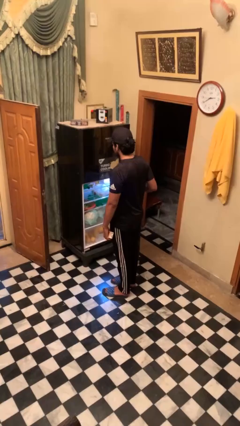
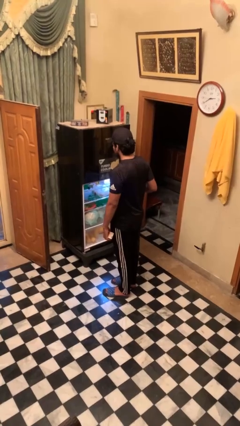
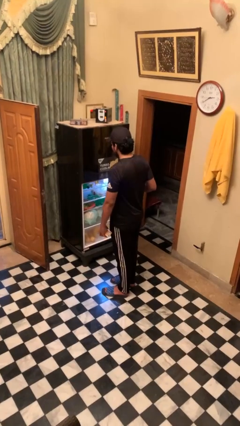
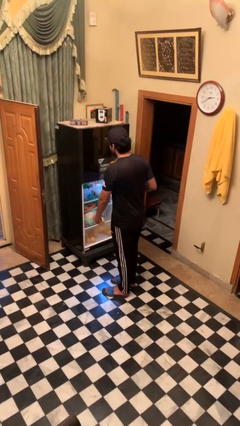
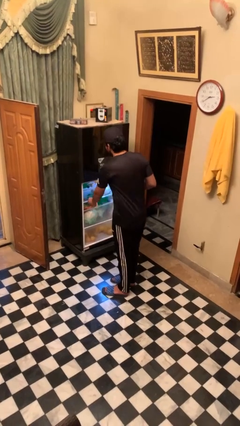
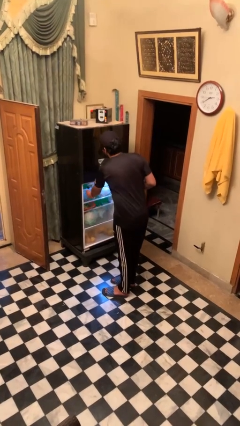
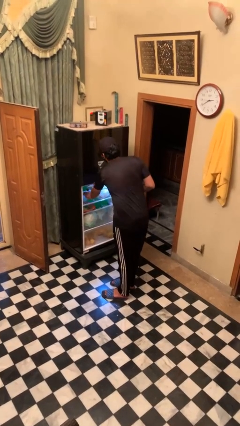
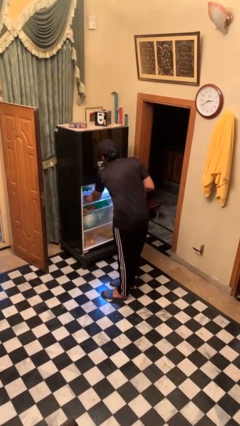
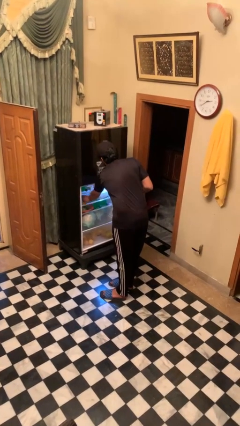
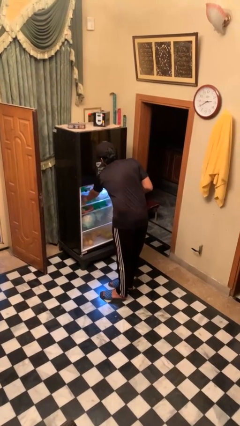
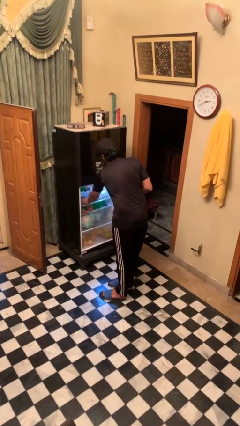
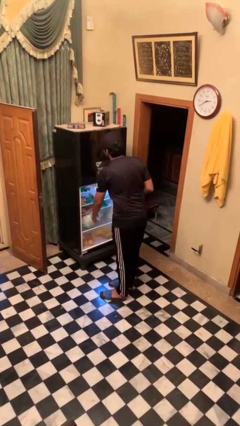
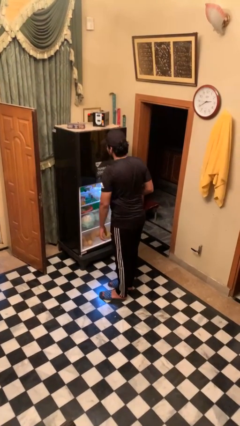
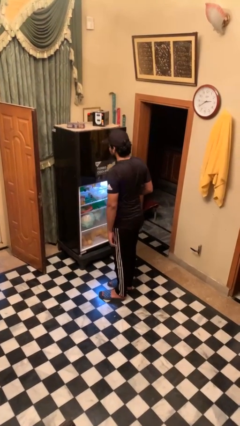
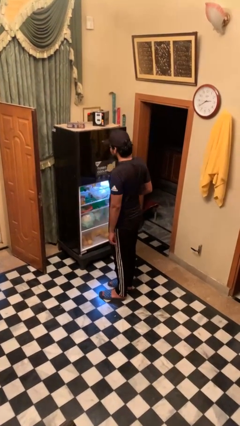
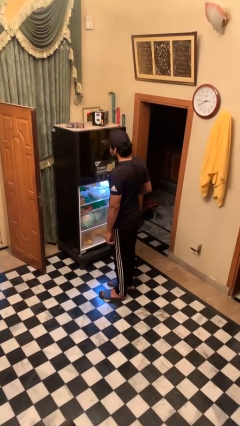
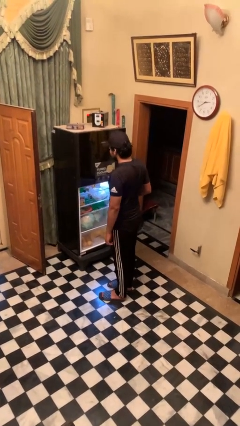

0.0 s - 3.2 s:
person puts object into refrigerator

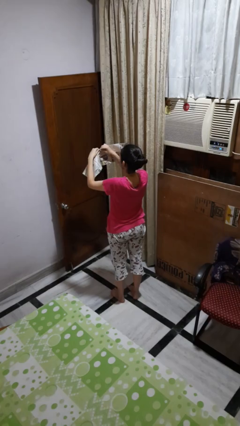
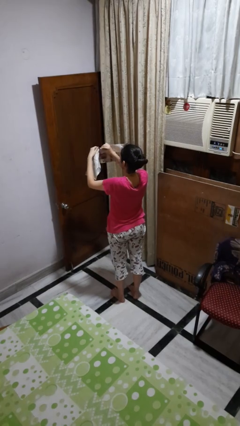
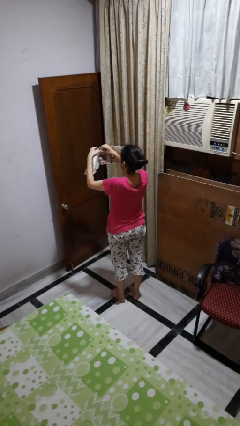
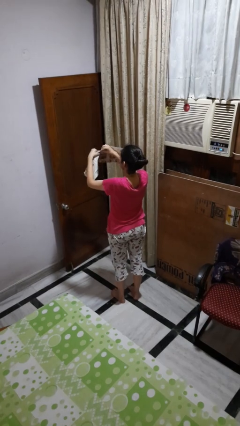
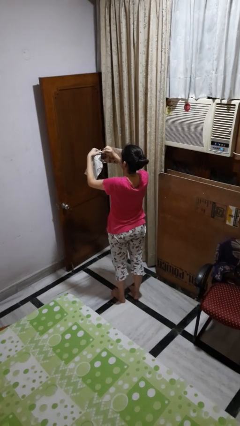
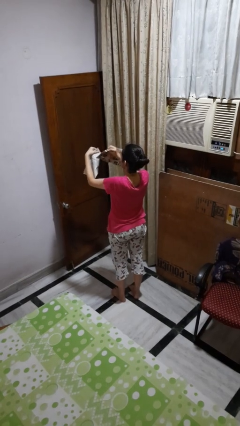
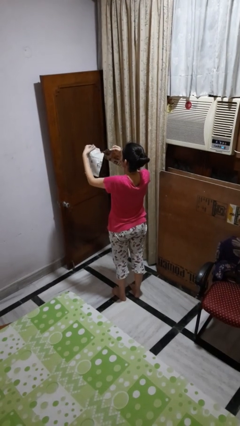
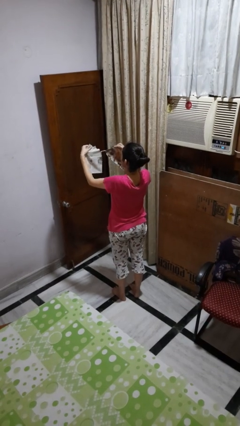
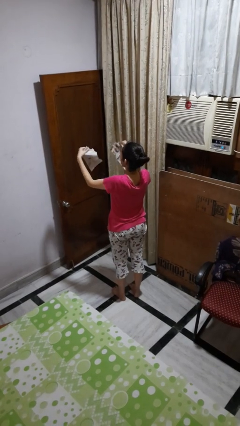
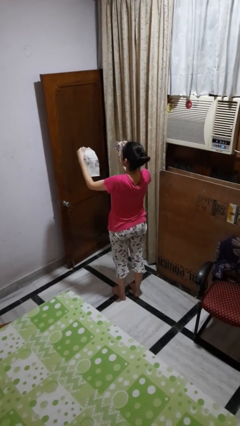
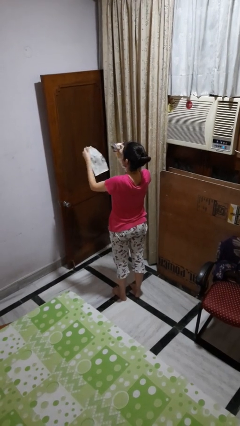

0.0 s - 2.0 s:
person tears paper

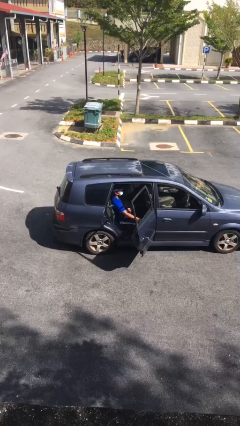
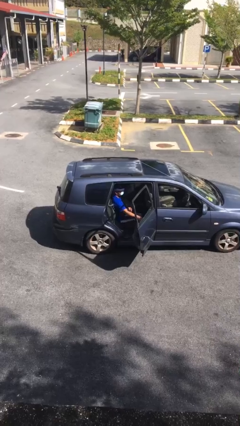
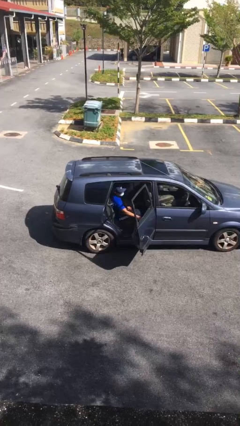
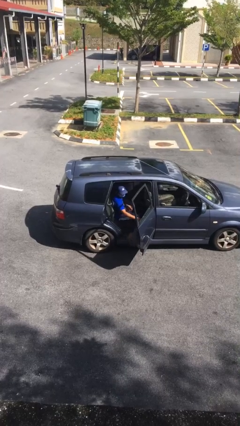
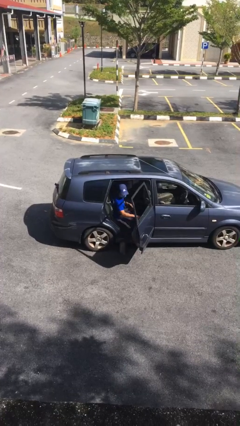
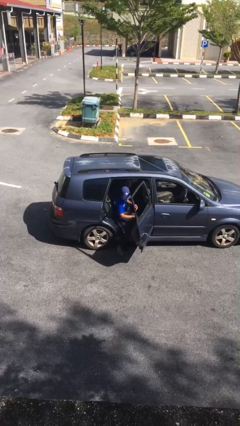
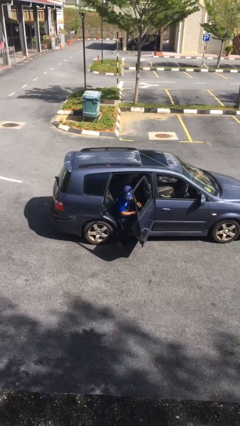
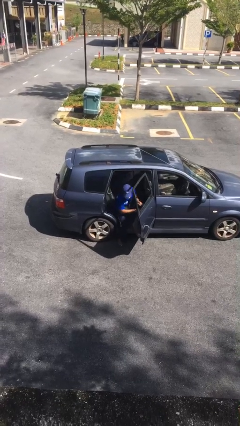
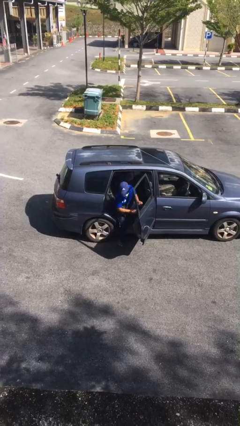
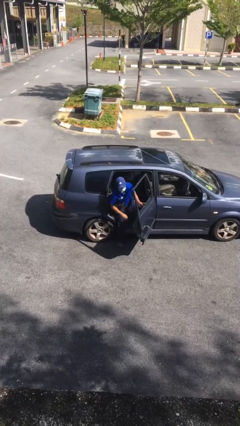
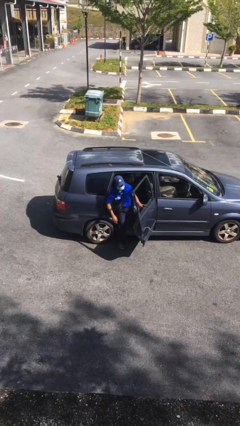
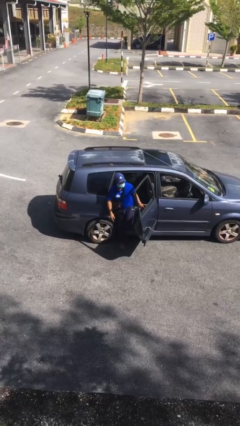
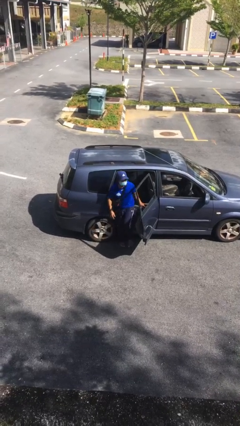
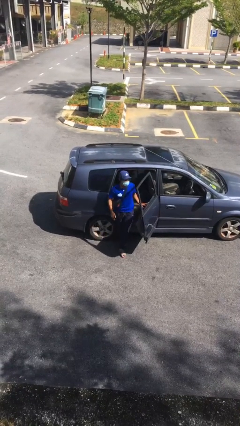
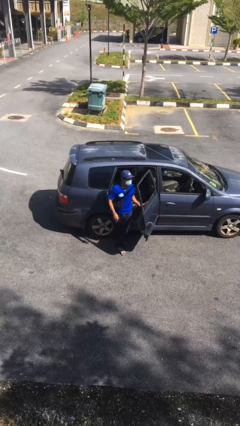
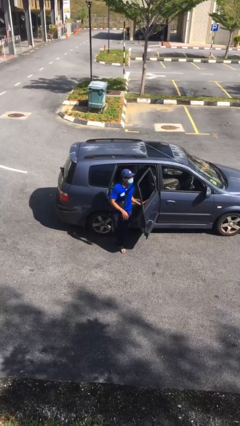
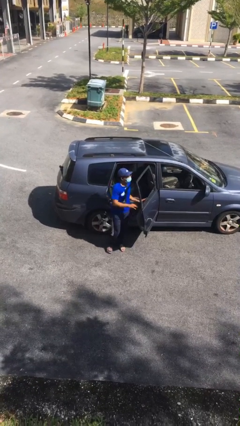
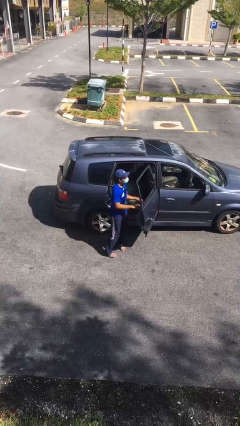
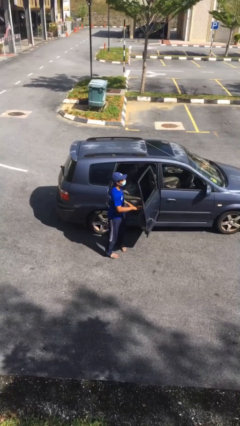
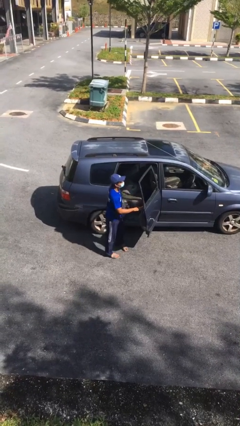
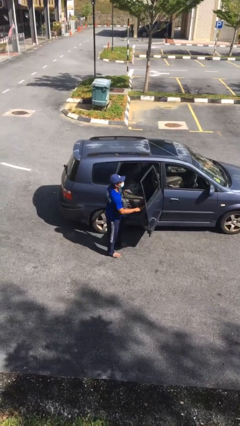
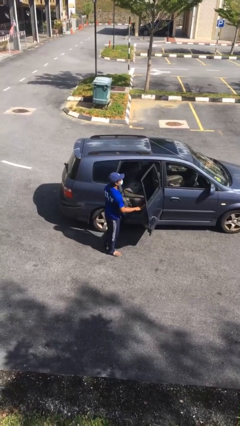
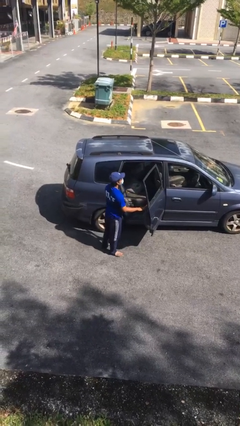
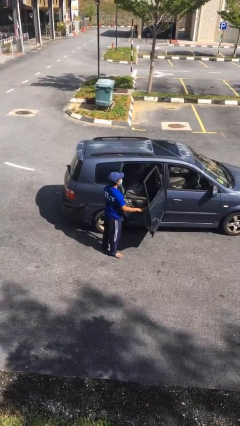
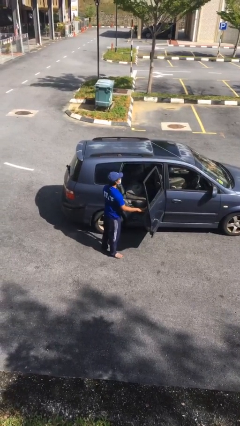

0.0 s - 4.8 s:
person exits car

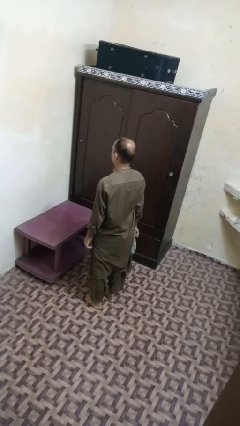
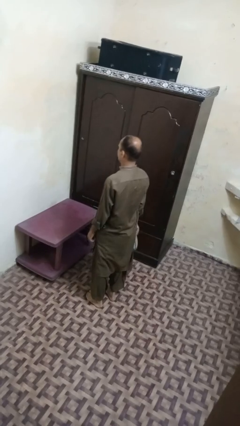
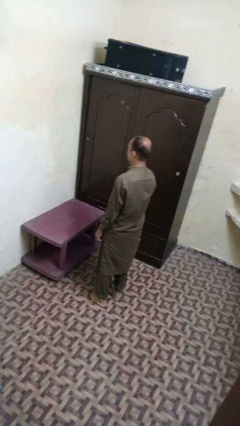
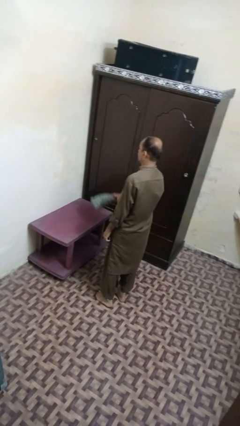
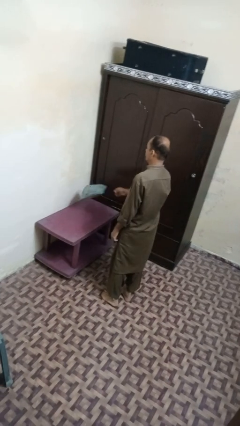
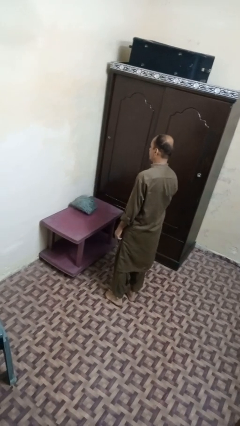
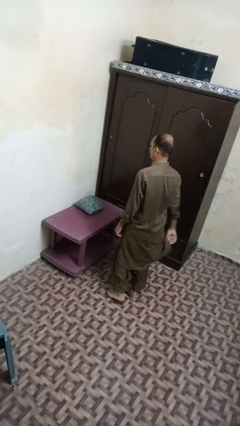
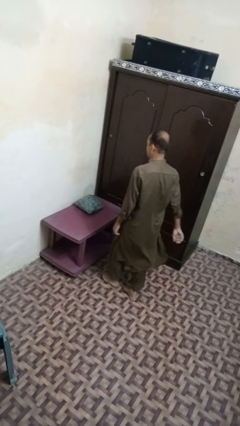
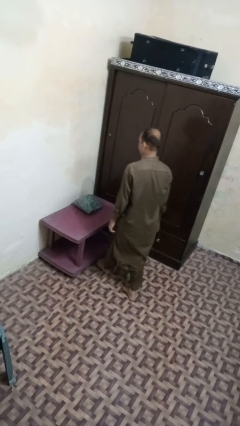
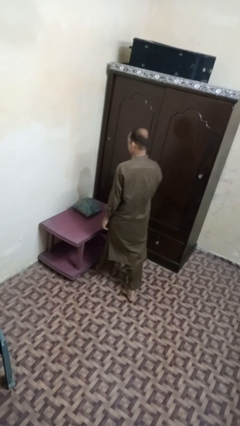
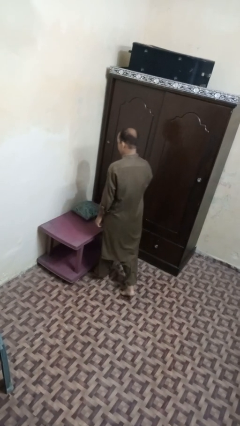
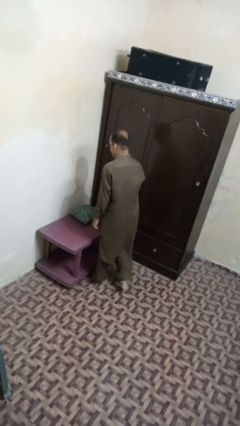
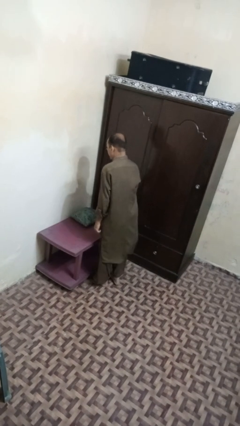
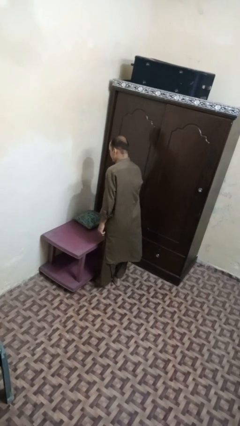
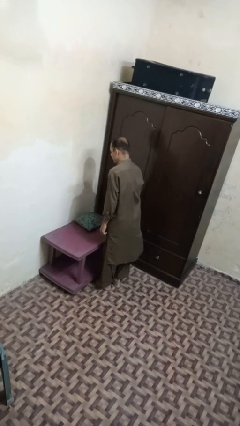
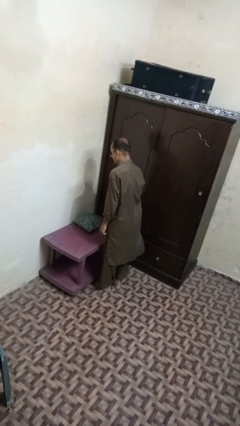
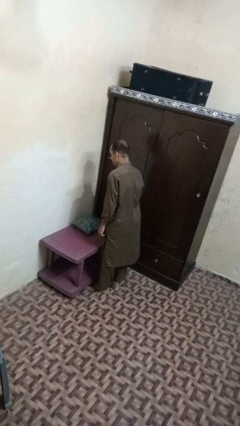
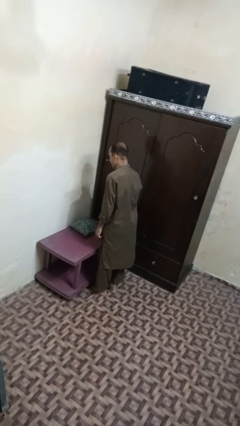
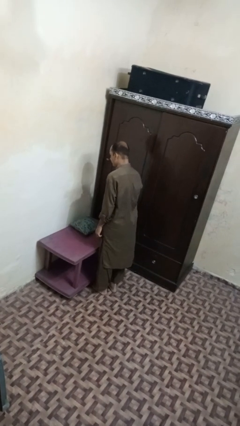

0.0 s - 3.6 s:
person throws object on table

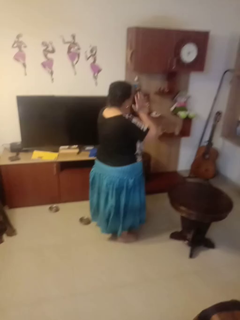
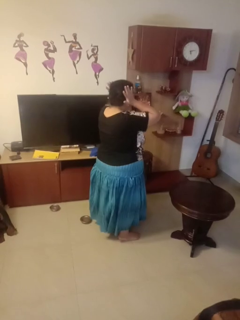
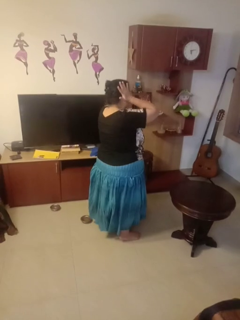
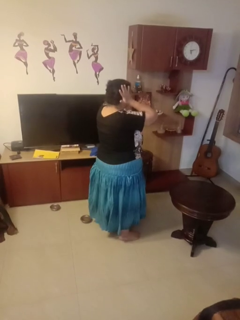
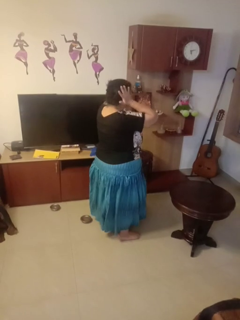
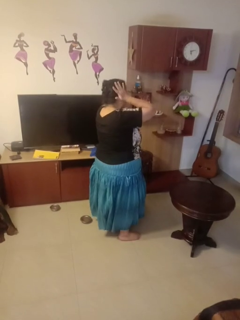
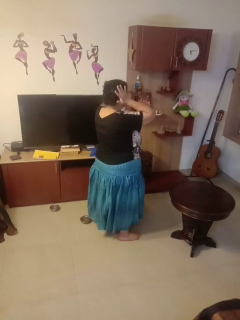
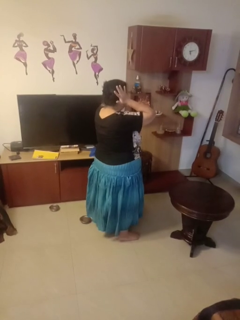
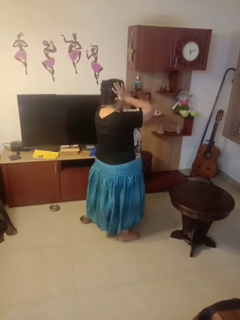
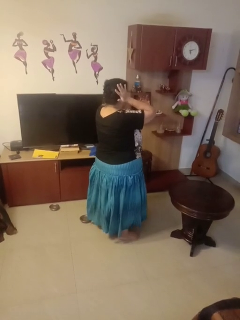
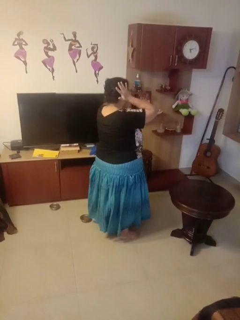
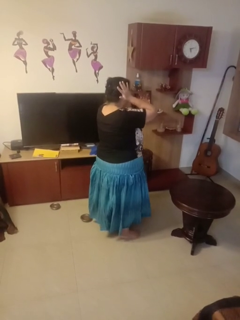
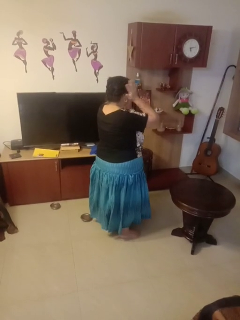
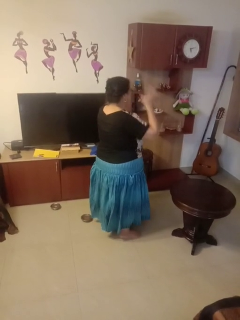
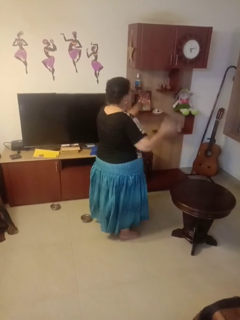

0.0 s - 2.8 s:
person puts fingers in ear

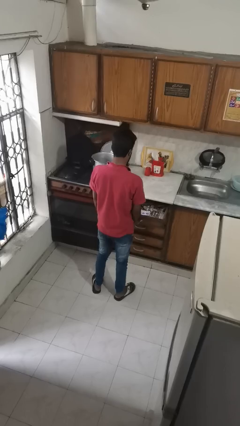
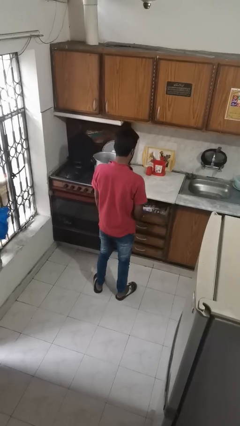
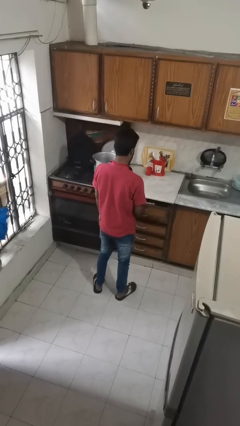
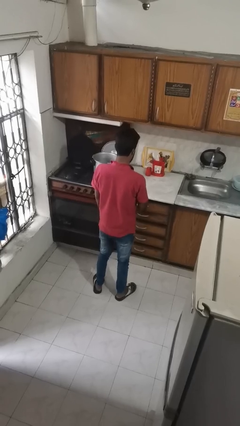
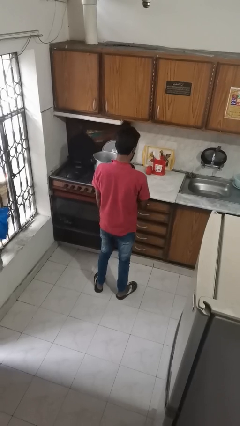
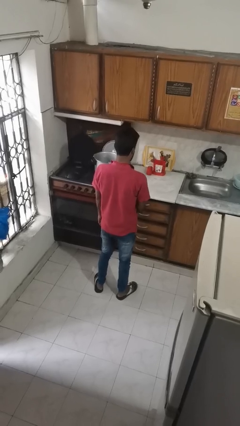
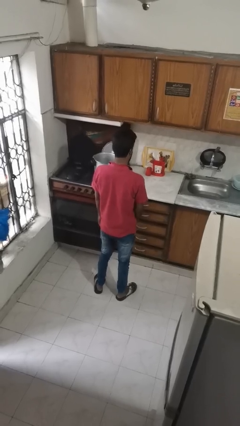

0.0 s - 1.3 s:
person closes kitchen drawer

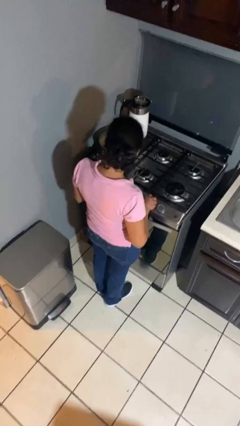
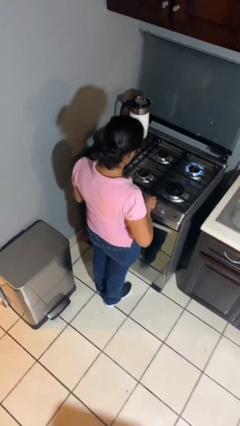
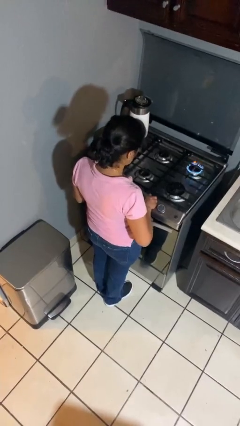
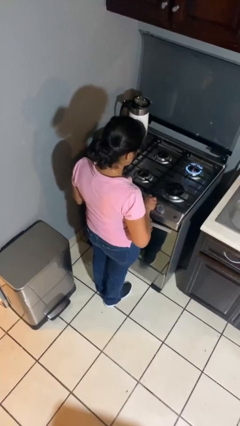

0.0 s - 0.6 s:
person turns on stovetop
